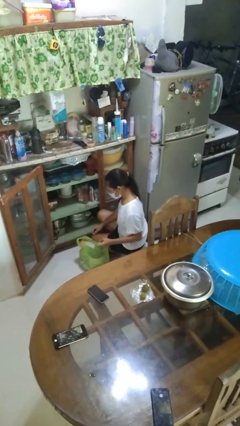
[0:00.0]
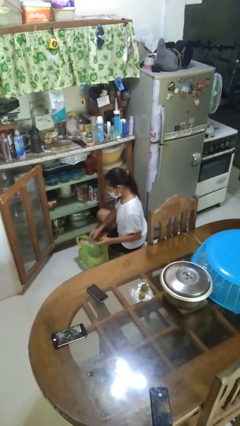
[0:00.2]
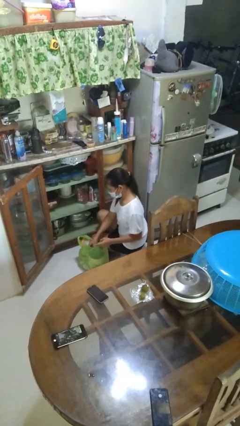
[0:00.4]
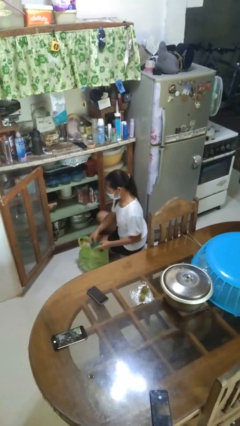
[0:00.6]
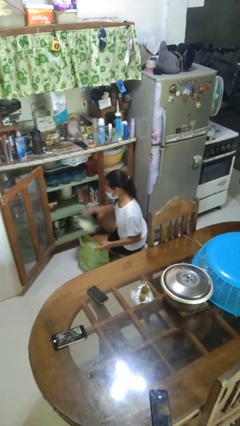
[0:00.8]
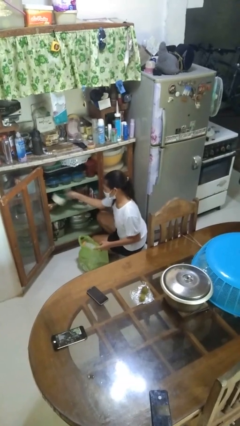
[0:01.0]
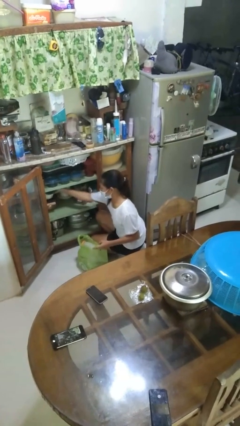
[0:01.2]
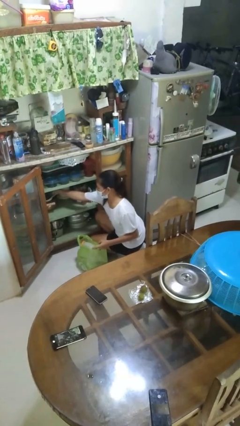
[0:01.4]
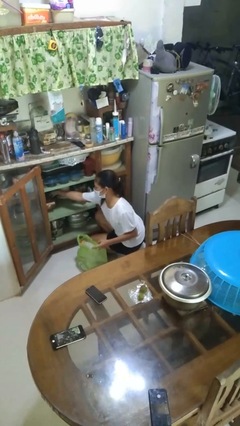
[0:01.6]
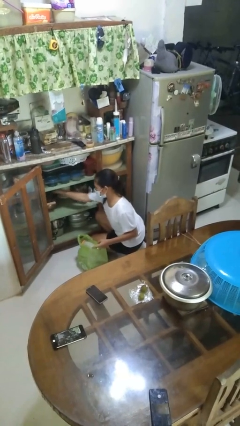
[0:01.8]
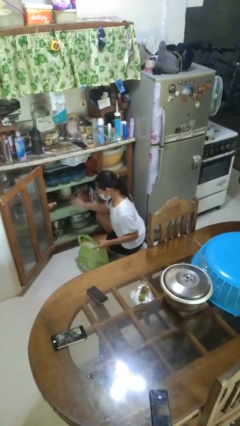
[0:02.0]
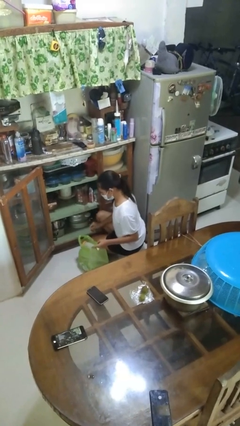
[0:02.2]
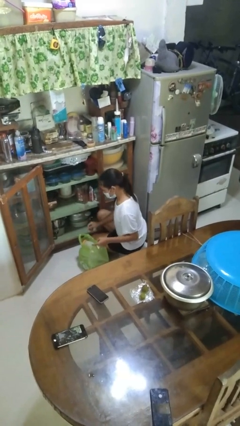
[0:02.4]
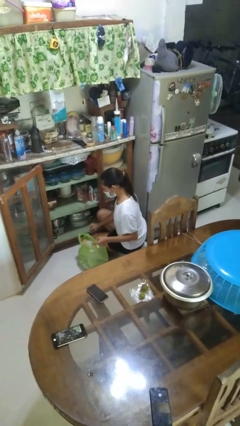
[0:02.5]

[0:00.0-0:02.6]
person loads groceries into cabinet

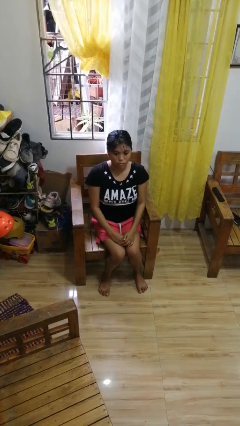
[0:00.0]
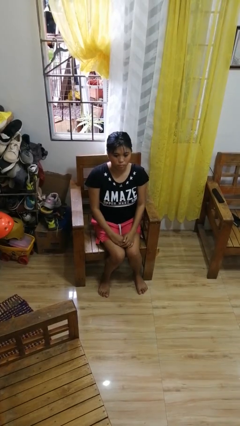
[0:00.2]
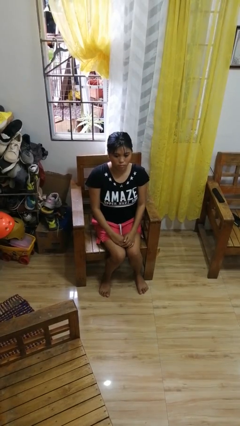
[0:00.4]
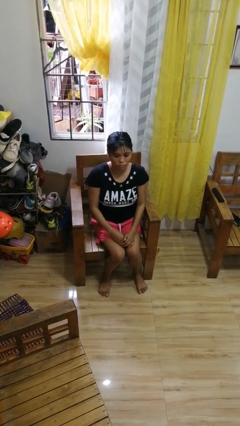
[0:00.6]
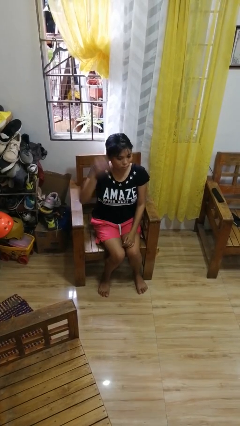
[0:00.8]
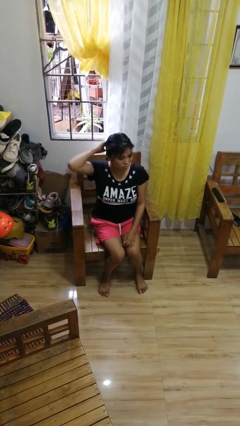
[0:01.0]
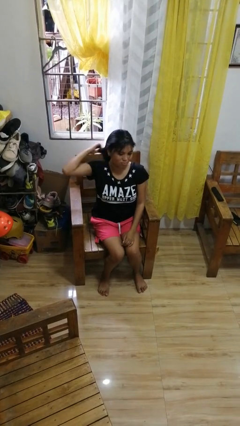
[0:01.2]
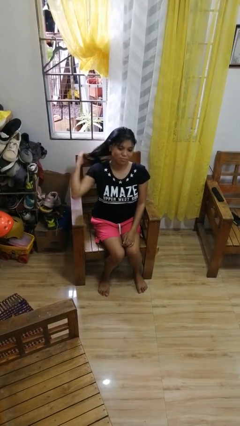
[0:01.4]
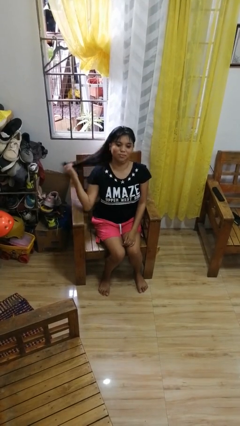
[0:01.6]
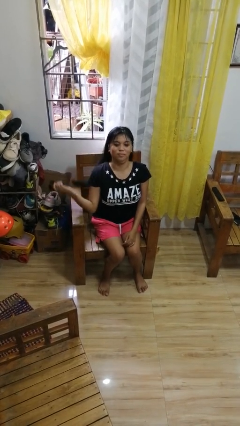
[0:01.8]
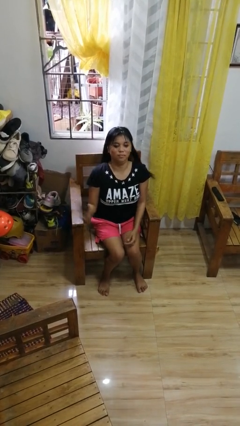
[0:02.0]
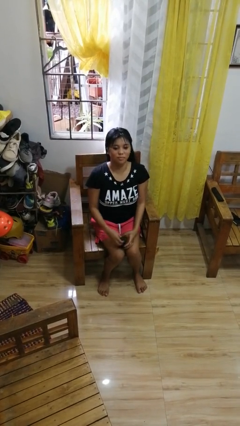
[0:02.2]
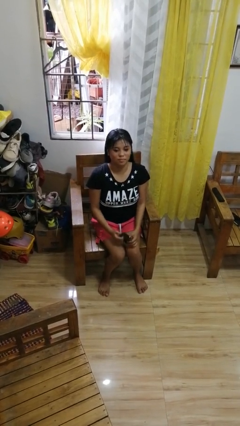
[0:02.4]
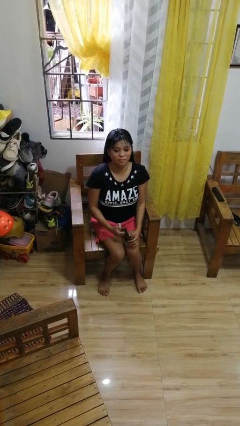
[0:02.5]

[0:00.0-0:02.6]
person takes off hairtie

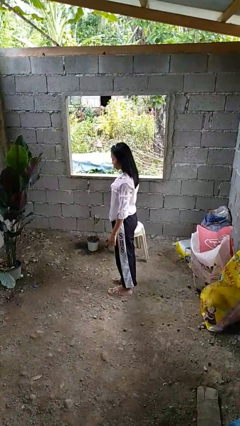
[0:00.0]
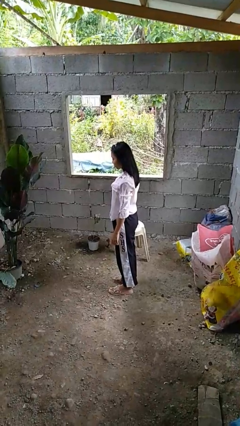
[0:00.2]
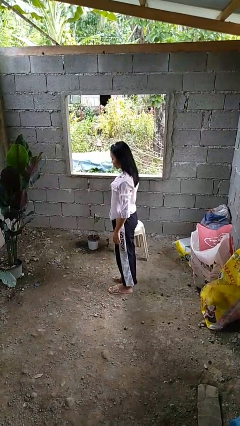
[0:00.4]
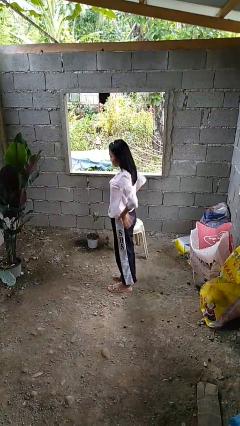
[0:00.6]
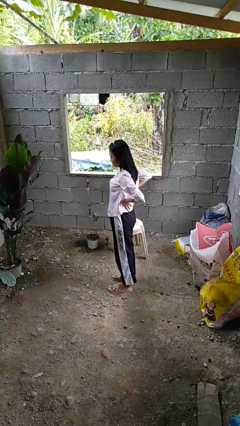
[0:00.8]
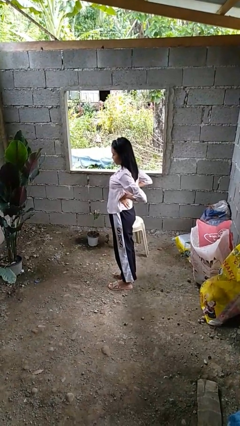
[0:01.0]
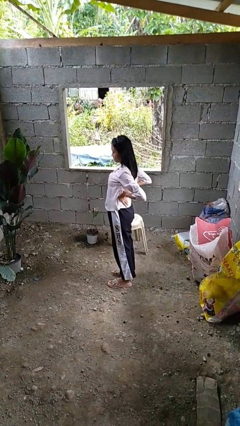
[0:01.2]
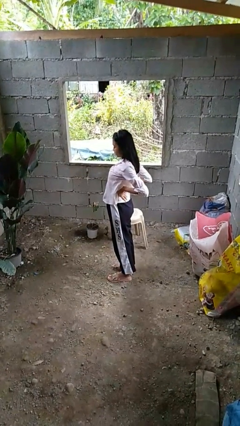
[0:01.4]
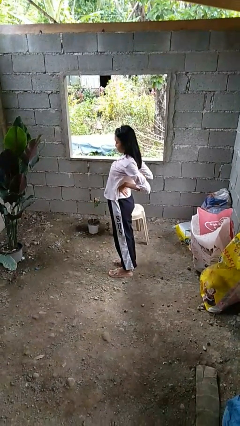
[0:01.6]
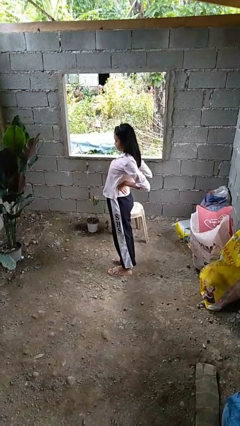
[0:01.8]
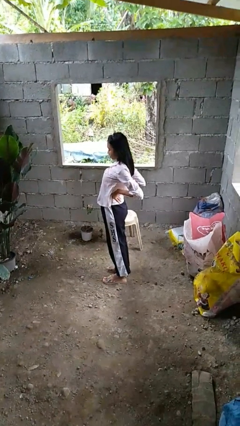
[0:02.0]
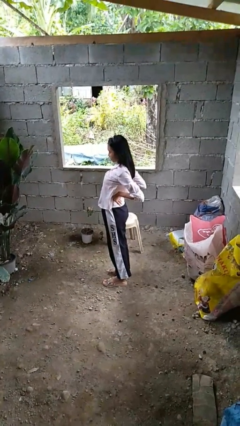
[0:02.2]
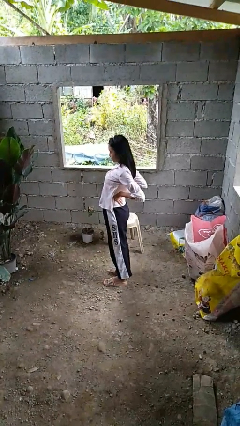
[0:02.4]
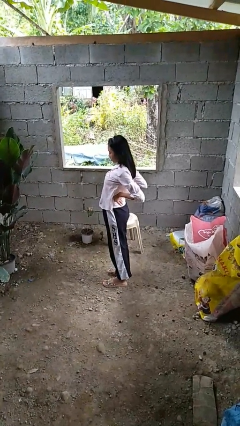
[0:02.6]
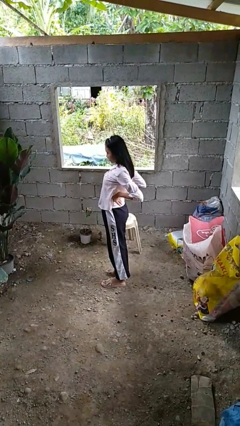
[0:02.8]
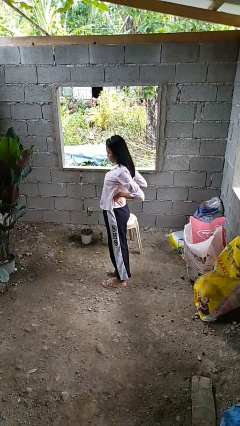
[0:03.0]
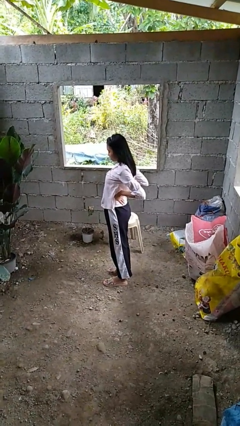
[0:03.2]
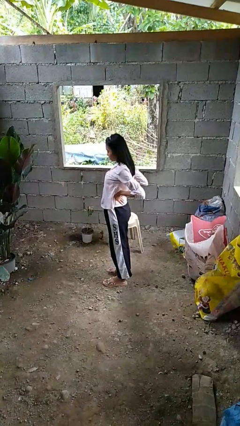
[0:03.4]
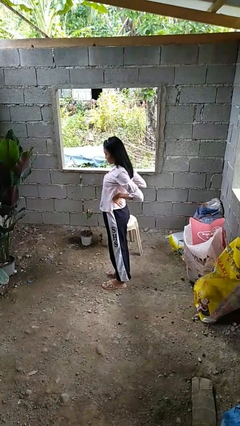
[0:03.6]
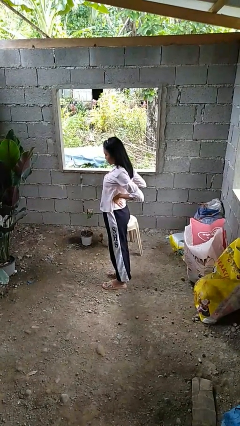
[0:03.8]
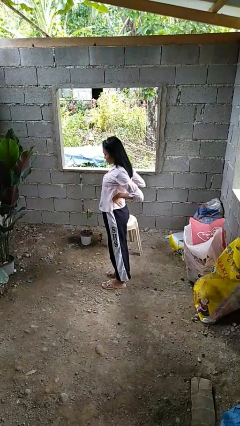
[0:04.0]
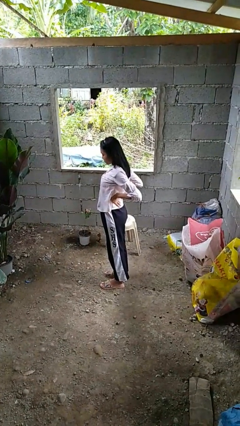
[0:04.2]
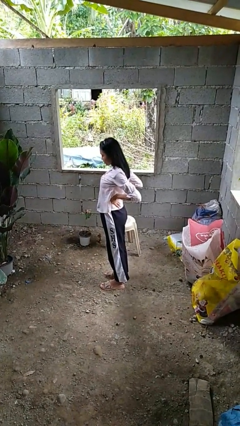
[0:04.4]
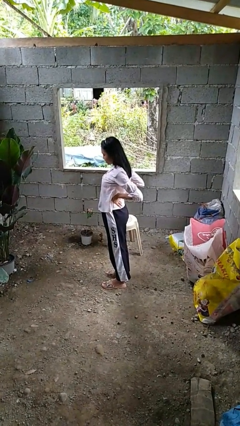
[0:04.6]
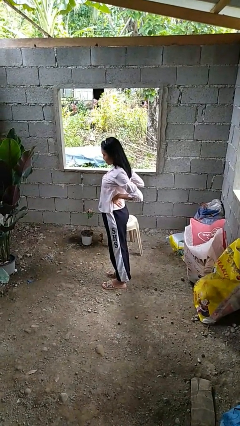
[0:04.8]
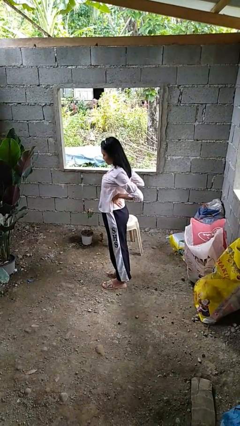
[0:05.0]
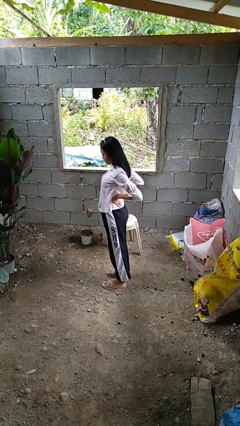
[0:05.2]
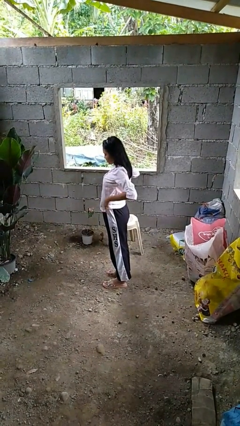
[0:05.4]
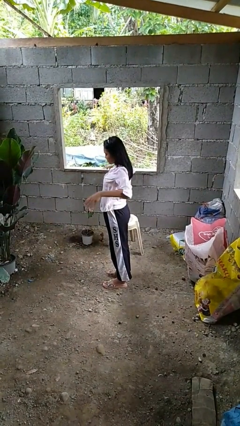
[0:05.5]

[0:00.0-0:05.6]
person stretches back

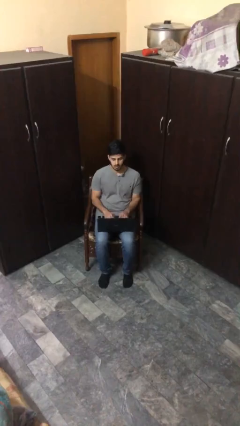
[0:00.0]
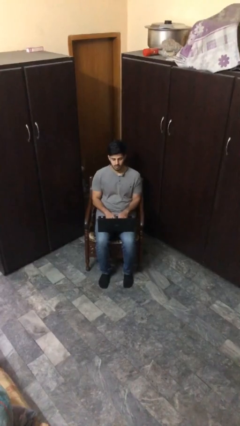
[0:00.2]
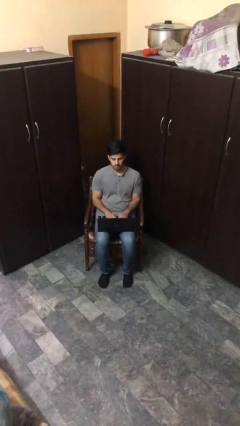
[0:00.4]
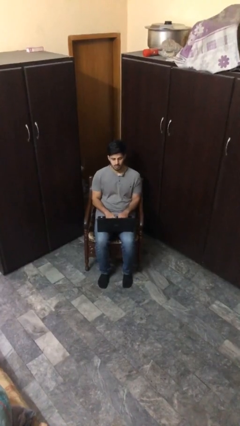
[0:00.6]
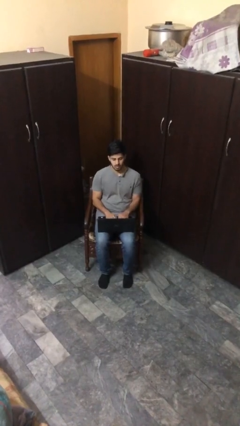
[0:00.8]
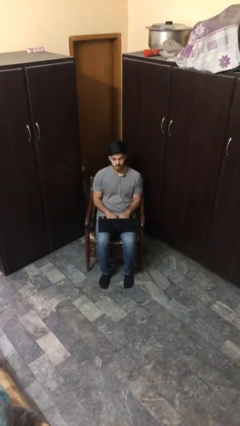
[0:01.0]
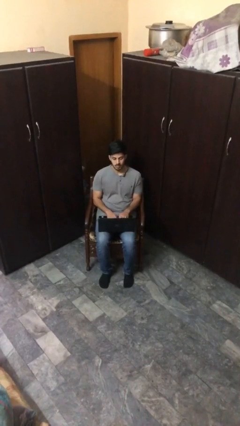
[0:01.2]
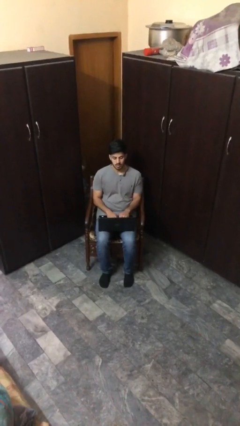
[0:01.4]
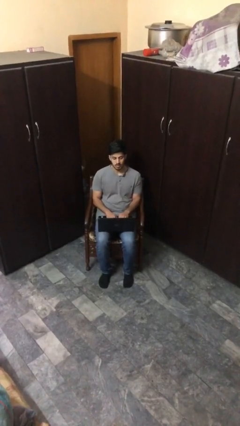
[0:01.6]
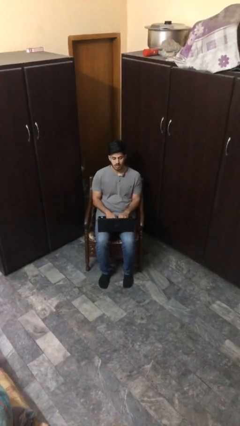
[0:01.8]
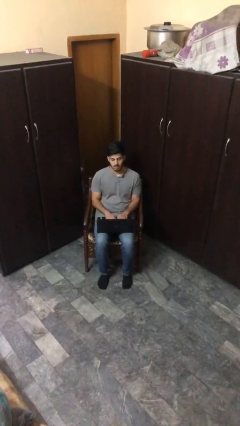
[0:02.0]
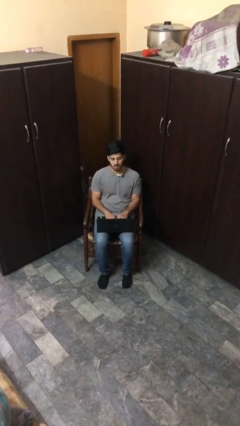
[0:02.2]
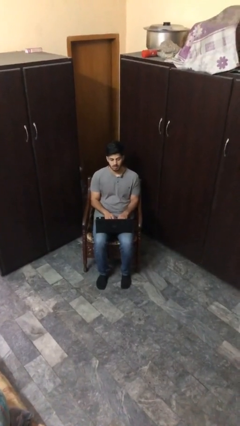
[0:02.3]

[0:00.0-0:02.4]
person interacts with laptop

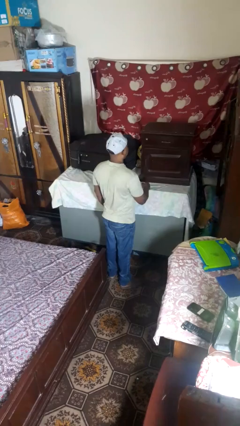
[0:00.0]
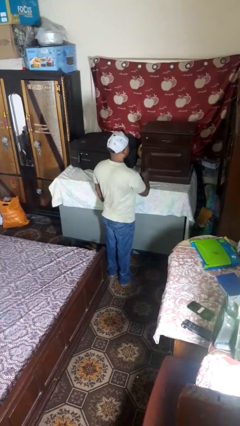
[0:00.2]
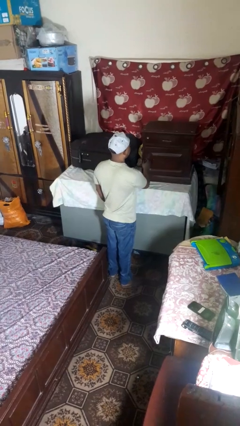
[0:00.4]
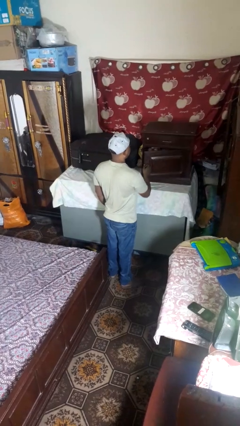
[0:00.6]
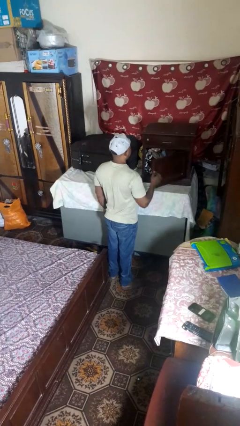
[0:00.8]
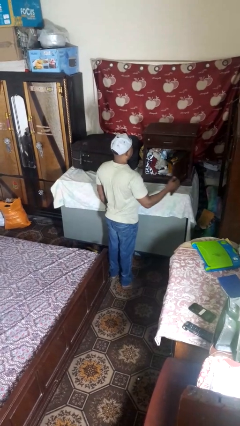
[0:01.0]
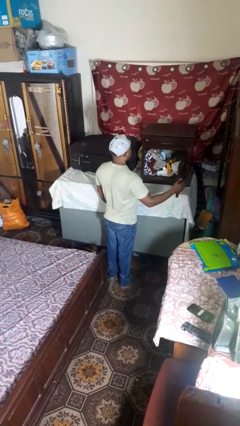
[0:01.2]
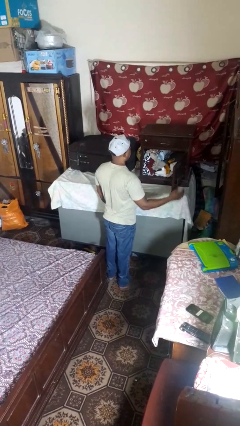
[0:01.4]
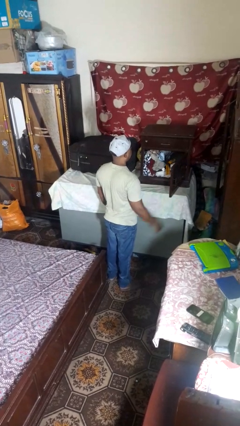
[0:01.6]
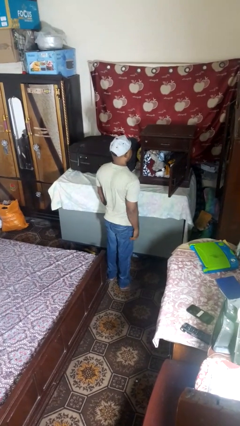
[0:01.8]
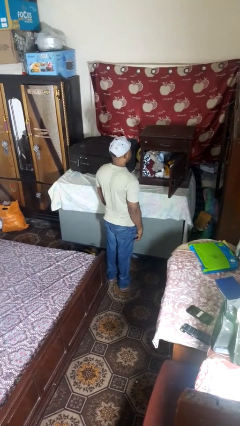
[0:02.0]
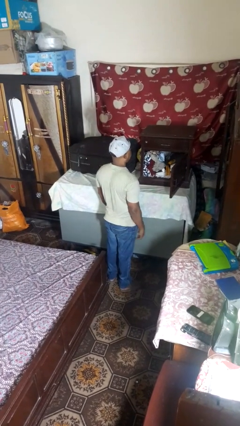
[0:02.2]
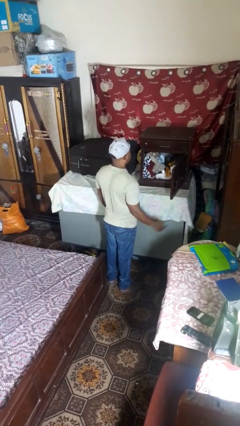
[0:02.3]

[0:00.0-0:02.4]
person opens closet door

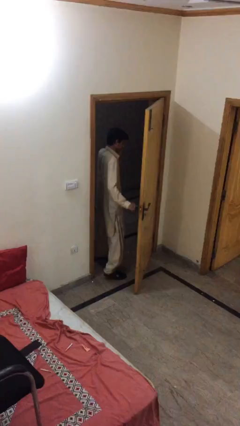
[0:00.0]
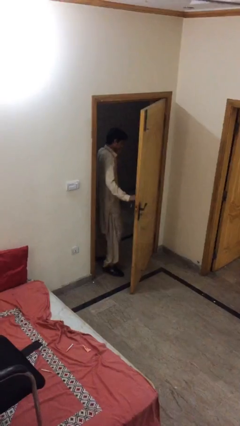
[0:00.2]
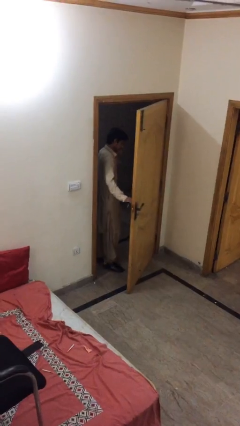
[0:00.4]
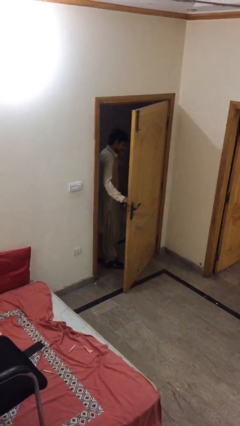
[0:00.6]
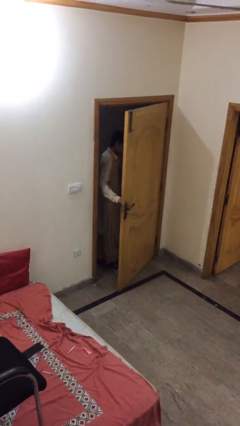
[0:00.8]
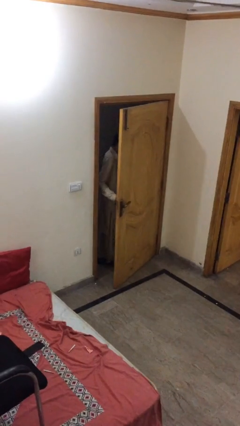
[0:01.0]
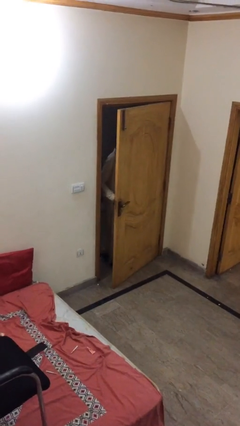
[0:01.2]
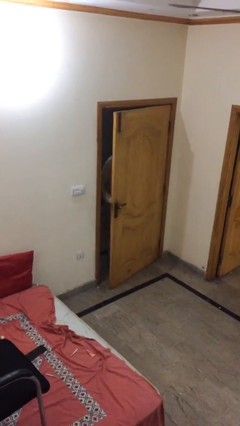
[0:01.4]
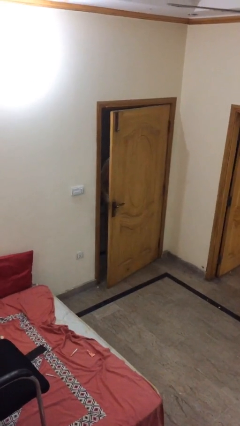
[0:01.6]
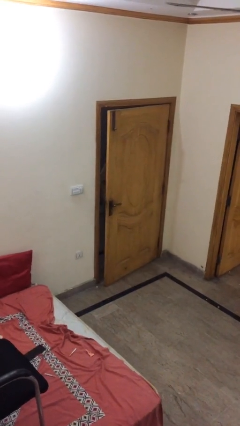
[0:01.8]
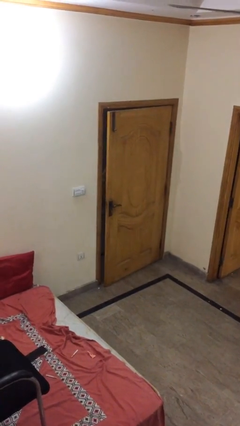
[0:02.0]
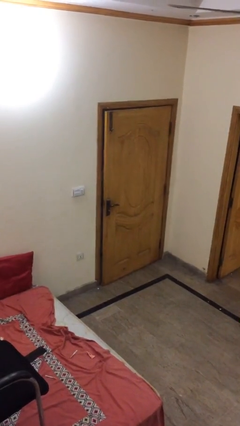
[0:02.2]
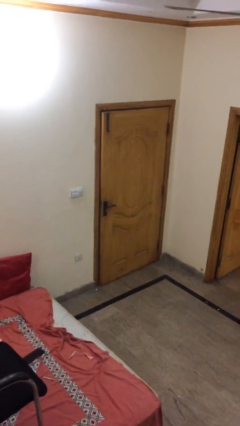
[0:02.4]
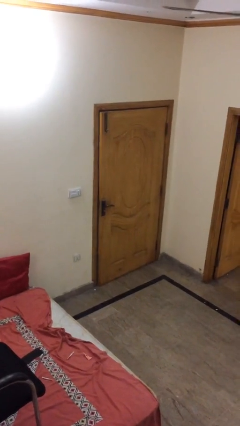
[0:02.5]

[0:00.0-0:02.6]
person closes facility door
